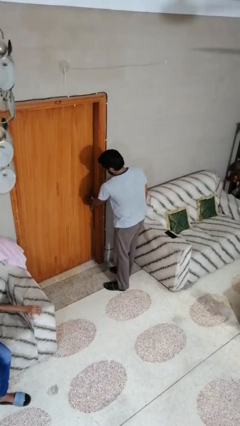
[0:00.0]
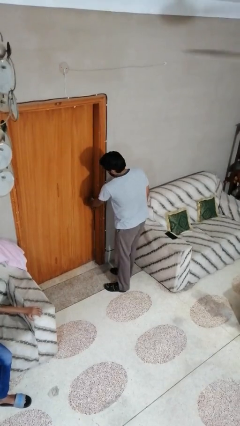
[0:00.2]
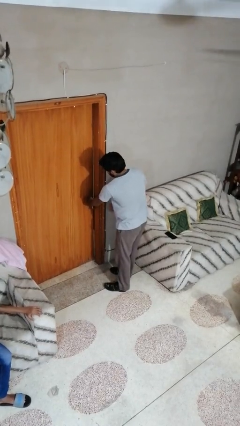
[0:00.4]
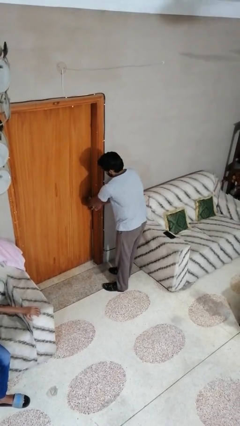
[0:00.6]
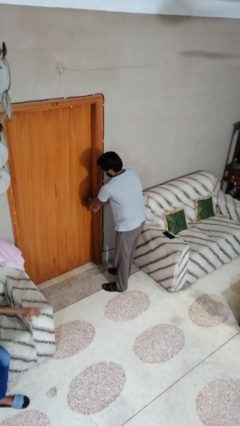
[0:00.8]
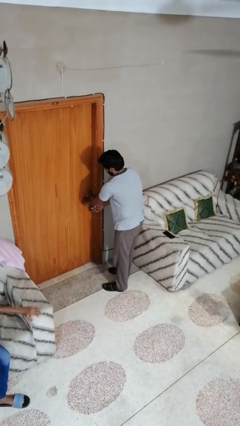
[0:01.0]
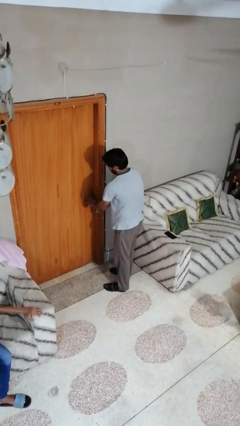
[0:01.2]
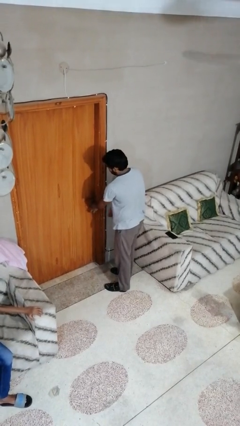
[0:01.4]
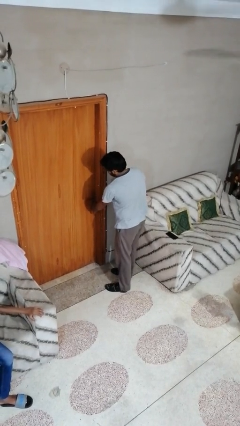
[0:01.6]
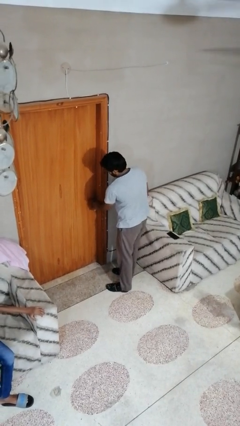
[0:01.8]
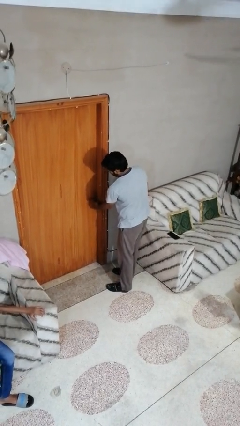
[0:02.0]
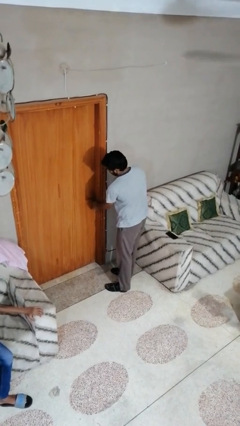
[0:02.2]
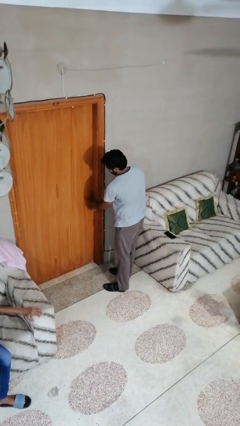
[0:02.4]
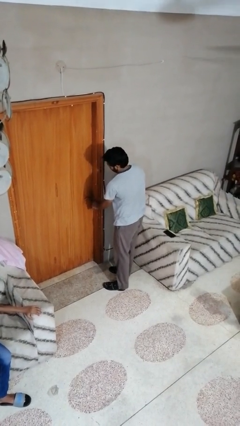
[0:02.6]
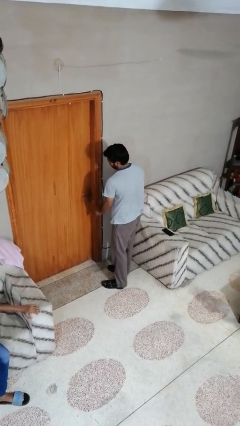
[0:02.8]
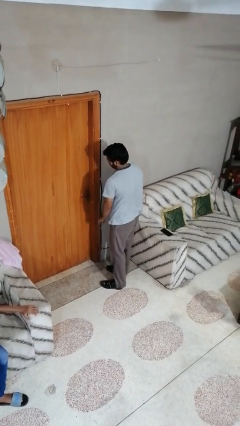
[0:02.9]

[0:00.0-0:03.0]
person locks door with keys

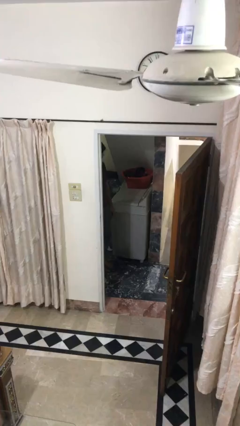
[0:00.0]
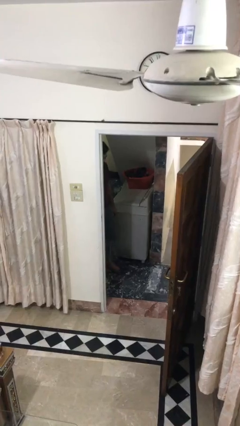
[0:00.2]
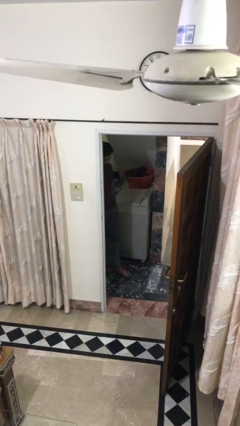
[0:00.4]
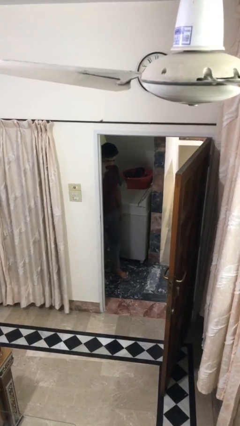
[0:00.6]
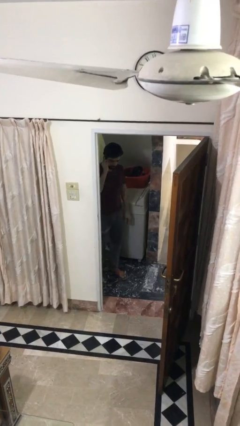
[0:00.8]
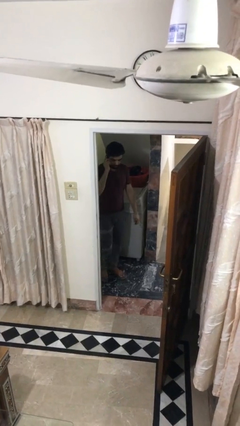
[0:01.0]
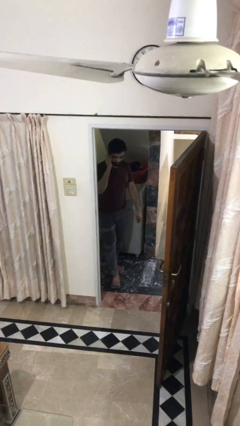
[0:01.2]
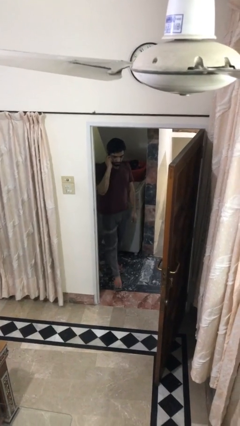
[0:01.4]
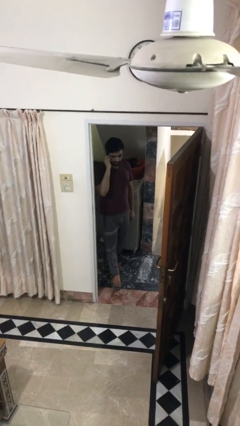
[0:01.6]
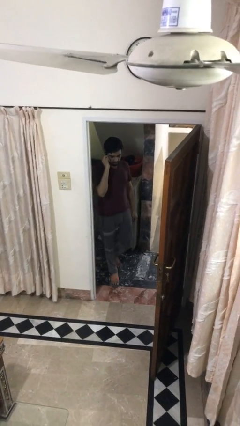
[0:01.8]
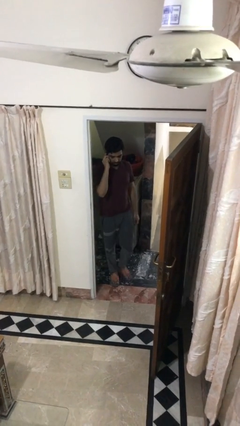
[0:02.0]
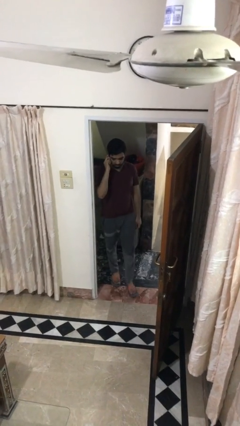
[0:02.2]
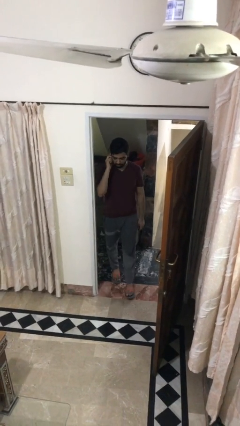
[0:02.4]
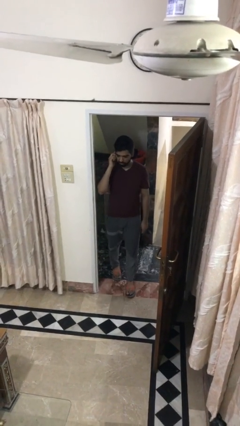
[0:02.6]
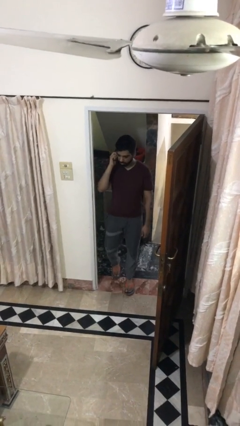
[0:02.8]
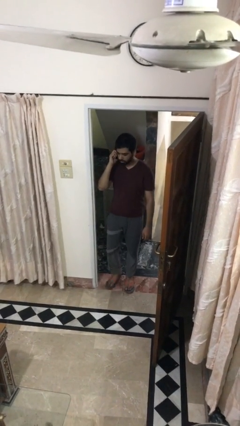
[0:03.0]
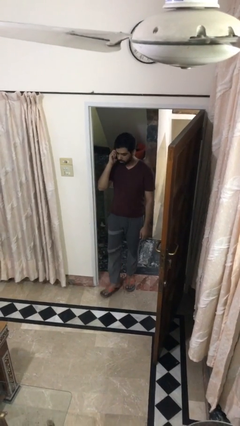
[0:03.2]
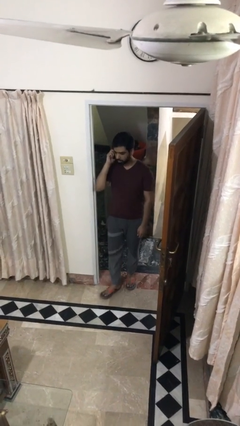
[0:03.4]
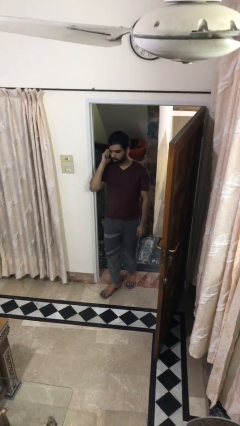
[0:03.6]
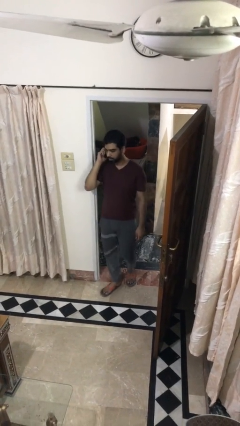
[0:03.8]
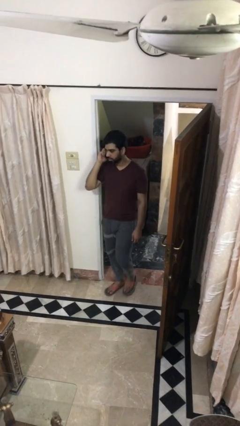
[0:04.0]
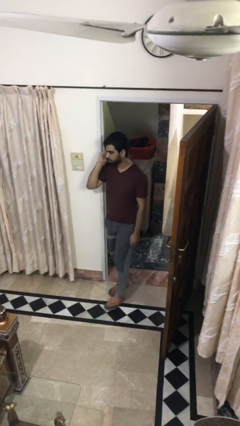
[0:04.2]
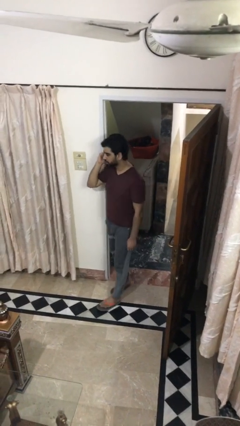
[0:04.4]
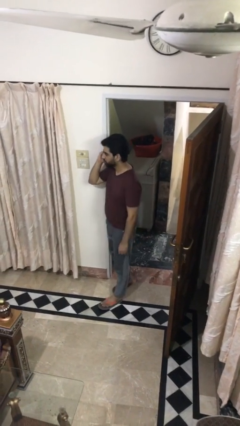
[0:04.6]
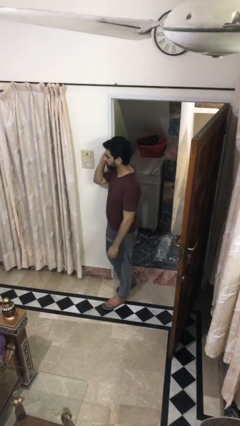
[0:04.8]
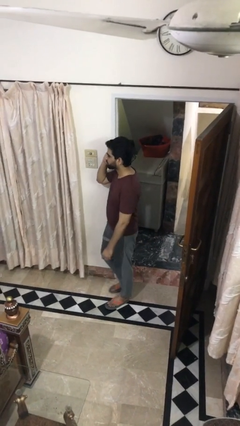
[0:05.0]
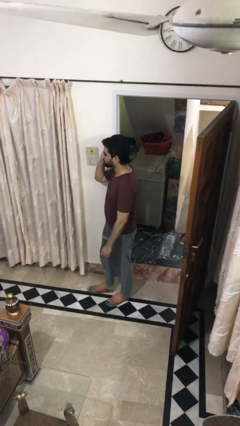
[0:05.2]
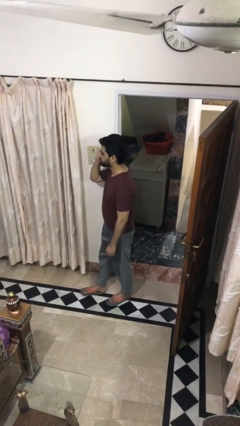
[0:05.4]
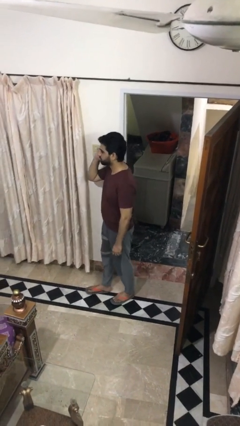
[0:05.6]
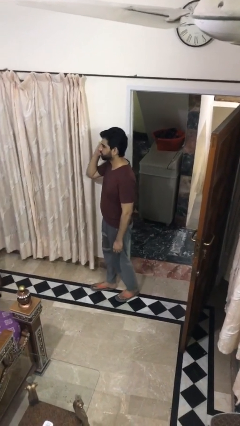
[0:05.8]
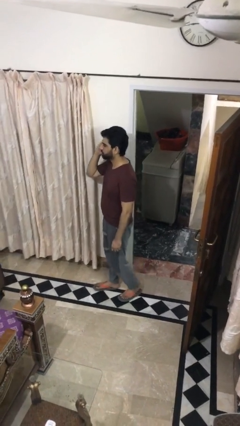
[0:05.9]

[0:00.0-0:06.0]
person enters scene through structure

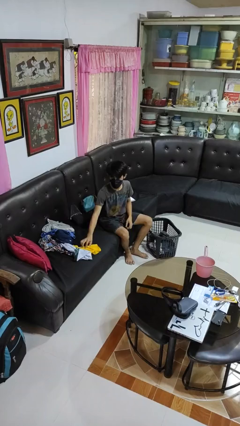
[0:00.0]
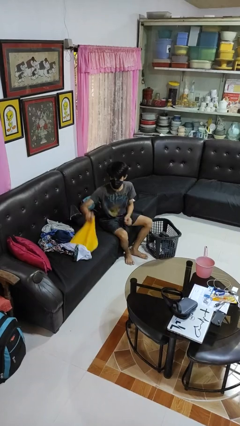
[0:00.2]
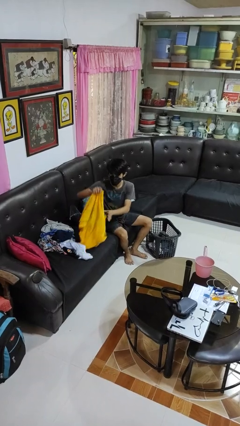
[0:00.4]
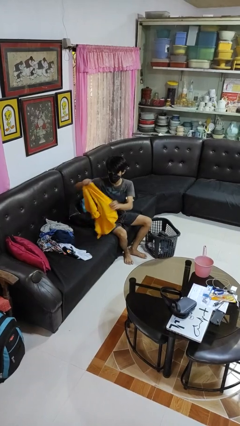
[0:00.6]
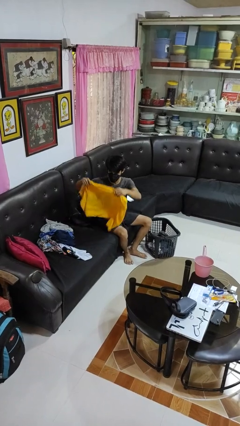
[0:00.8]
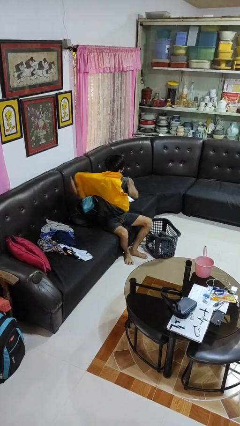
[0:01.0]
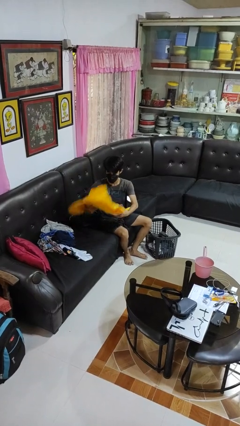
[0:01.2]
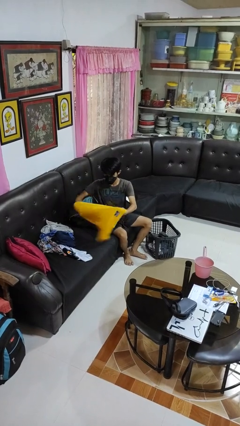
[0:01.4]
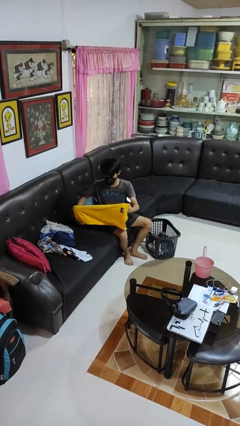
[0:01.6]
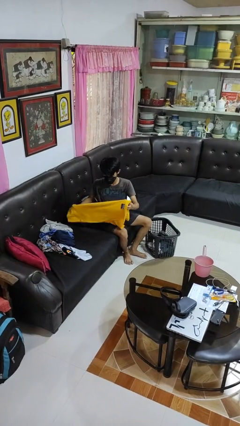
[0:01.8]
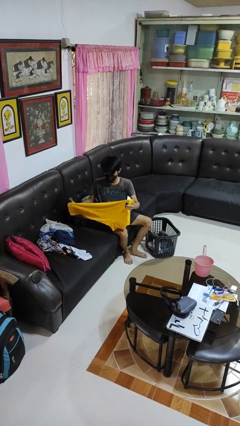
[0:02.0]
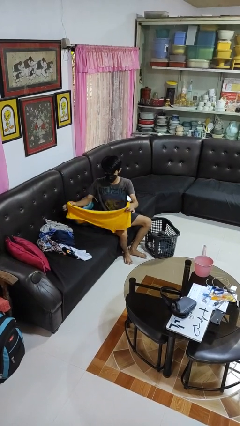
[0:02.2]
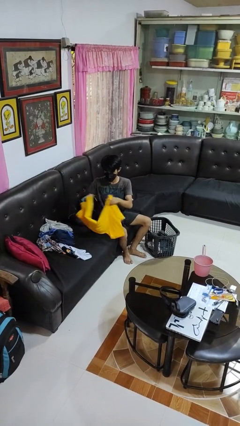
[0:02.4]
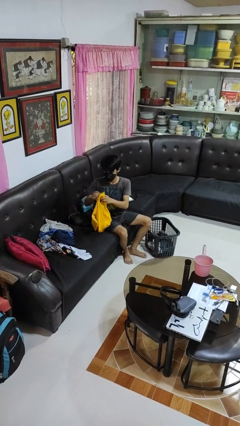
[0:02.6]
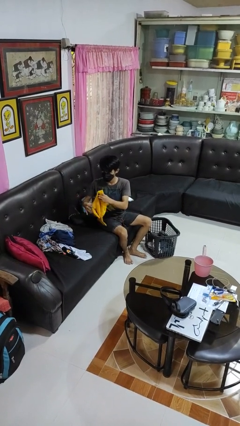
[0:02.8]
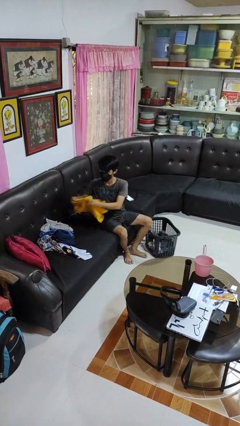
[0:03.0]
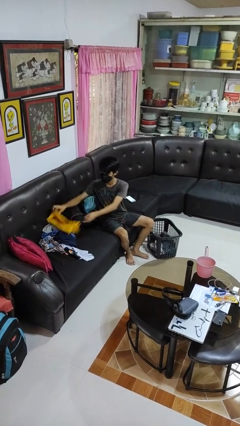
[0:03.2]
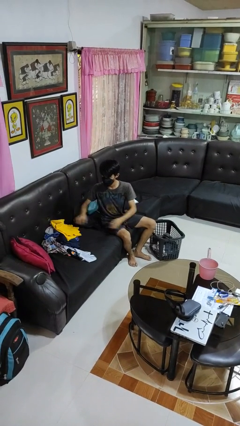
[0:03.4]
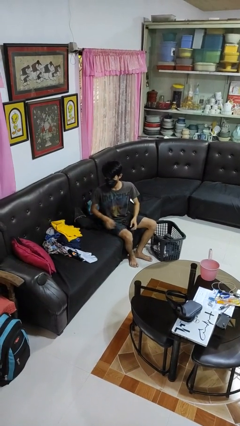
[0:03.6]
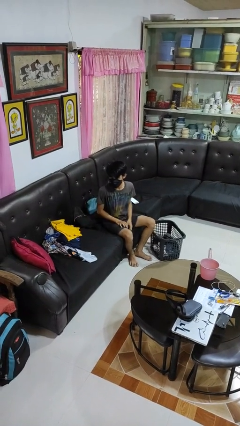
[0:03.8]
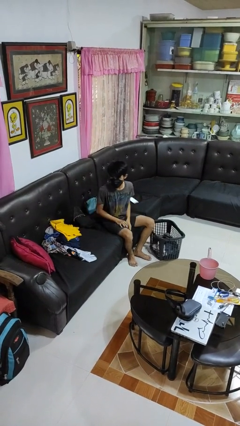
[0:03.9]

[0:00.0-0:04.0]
person folds shirt

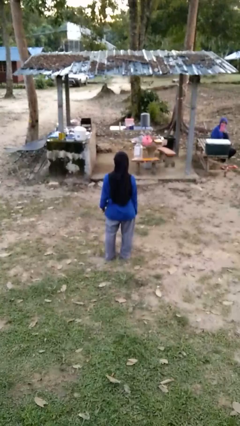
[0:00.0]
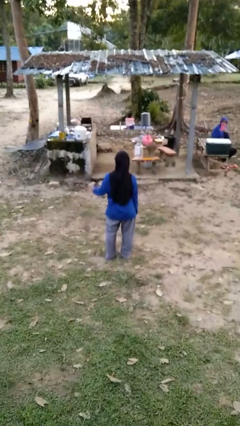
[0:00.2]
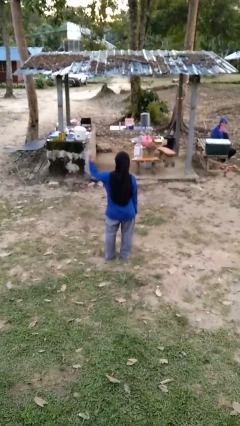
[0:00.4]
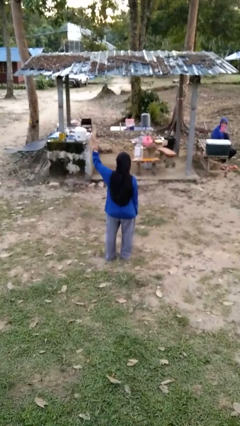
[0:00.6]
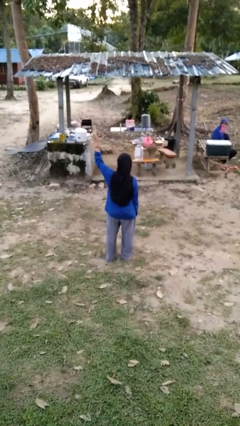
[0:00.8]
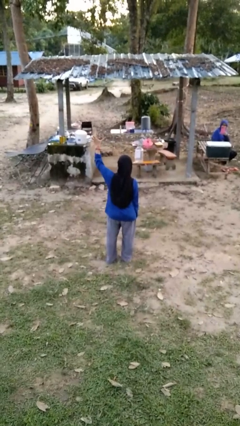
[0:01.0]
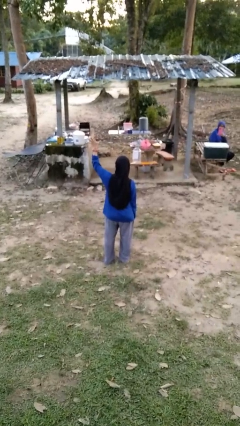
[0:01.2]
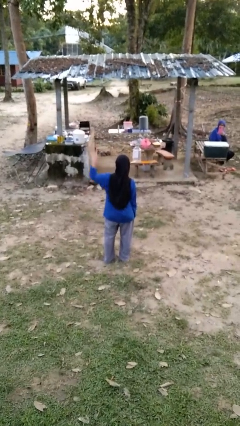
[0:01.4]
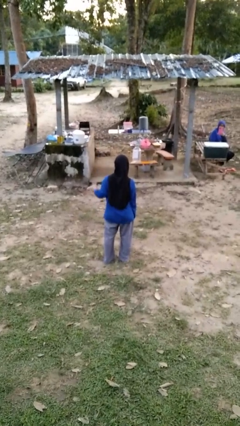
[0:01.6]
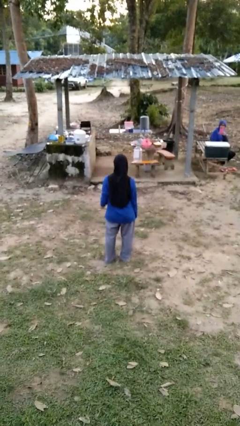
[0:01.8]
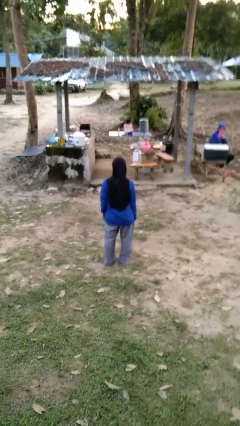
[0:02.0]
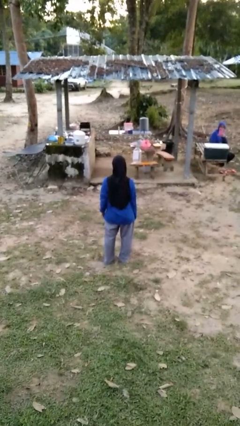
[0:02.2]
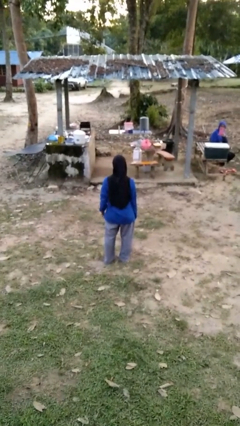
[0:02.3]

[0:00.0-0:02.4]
person gestures number five

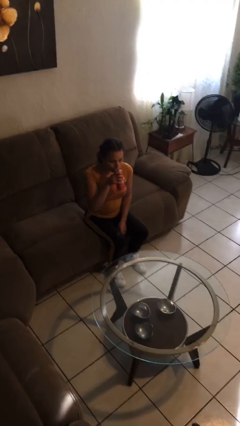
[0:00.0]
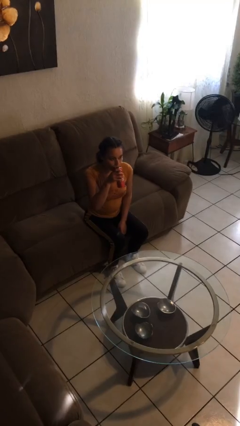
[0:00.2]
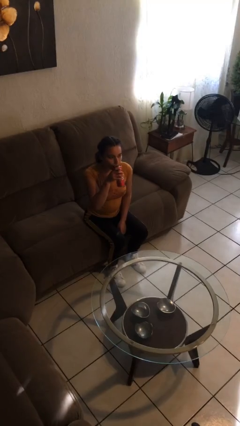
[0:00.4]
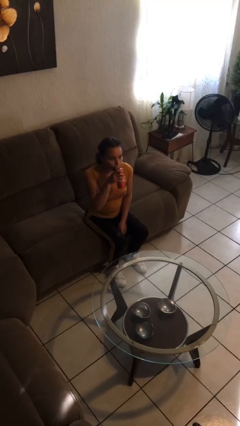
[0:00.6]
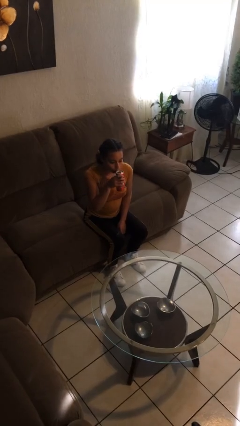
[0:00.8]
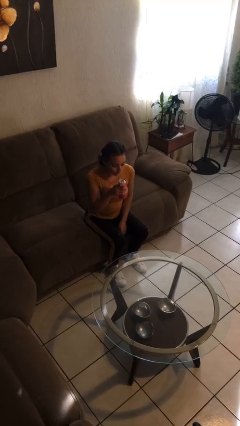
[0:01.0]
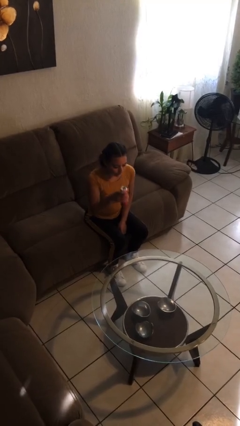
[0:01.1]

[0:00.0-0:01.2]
person drinks from beverage can

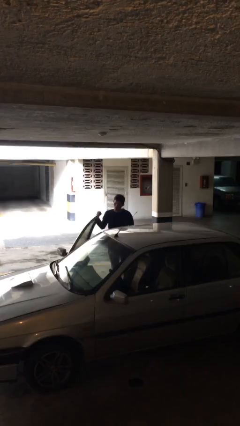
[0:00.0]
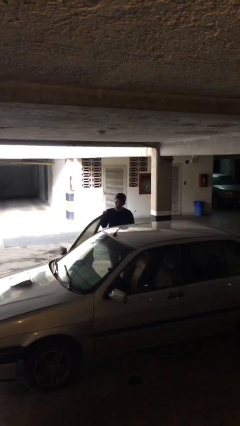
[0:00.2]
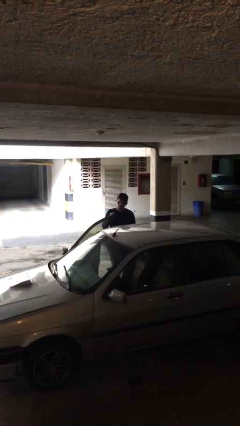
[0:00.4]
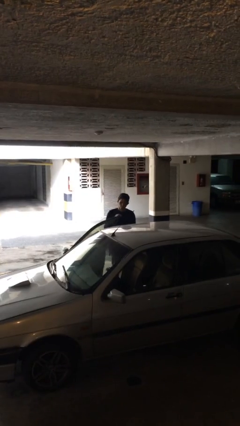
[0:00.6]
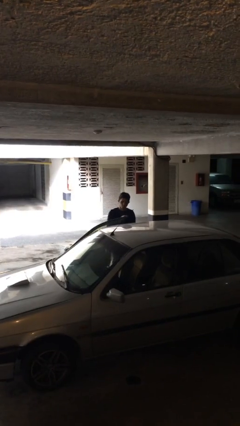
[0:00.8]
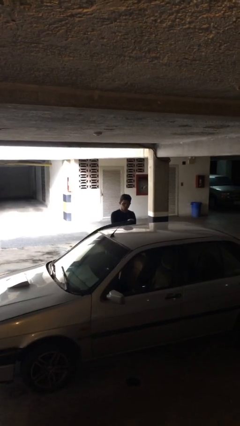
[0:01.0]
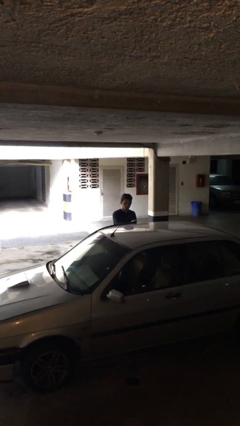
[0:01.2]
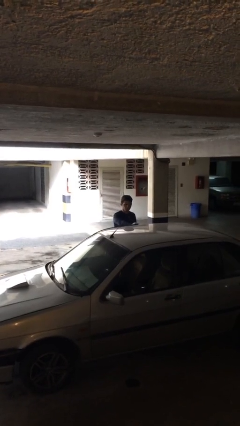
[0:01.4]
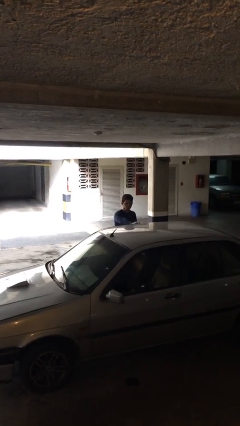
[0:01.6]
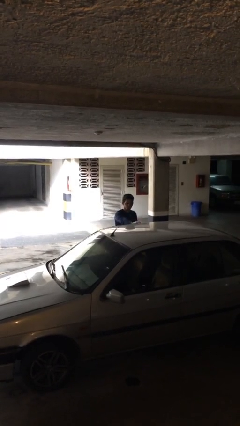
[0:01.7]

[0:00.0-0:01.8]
person closes car door
